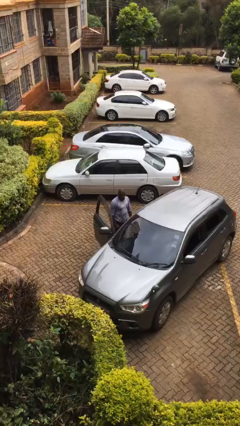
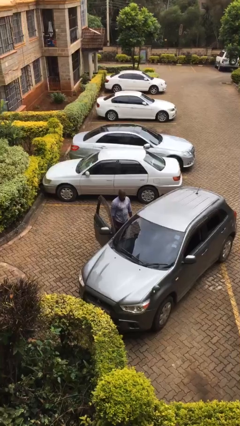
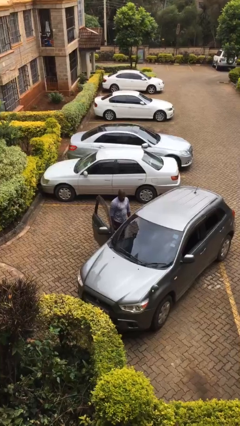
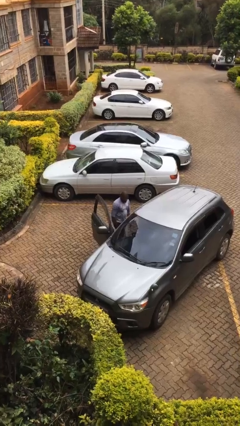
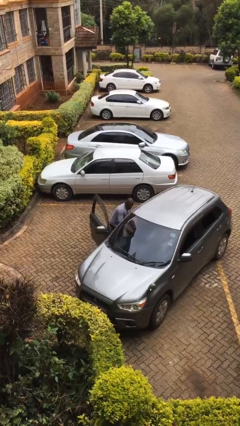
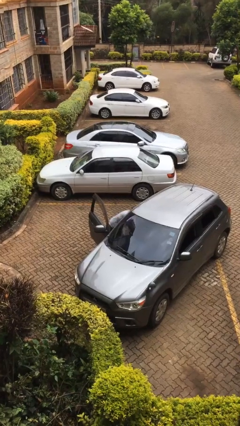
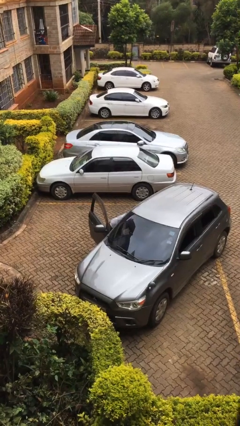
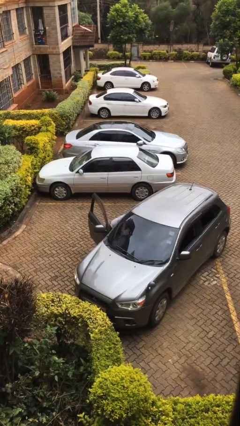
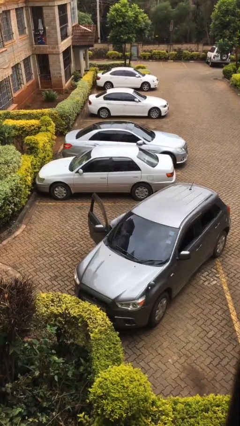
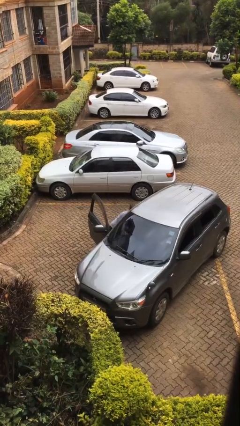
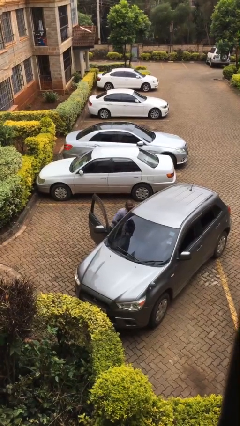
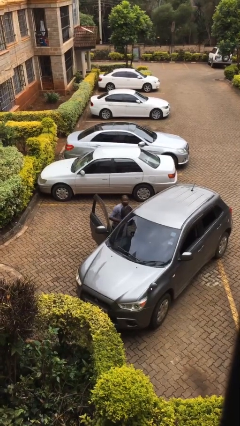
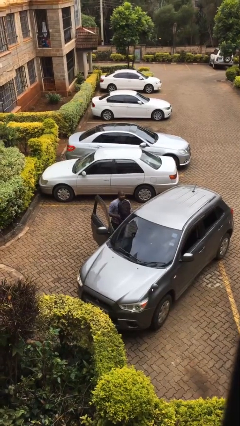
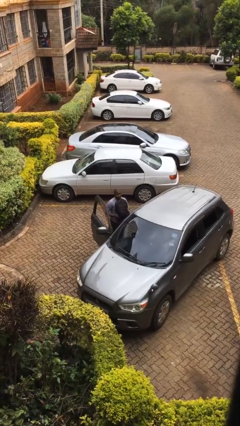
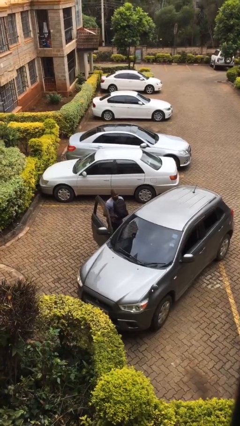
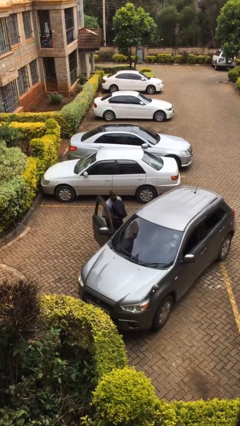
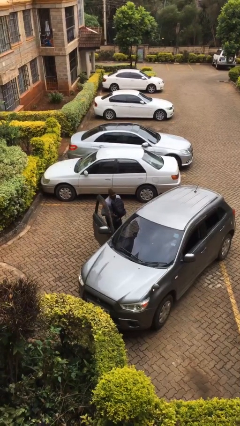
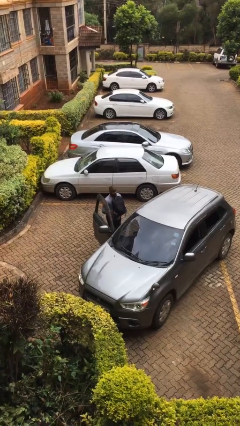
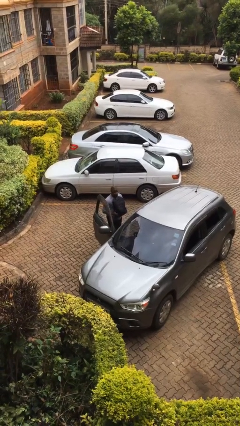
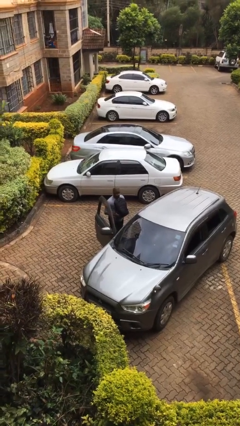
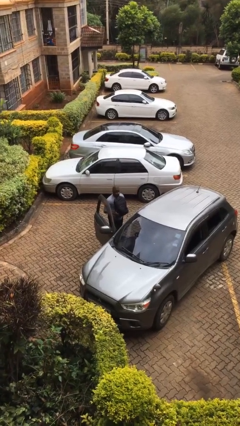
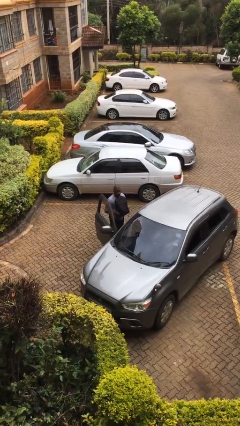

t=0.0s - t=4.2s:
person unloads car

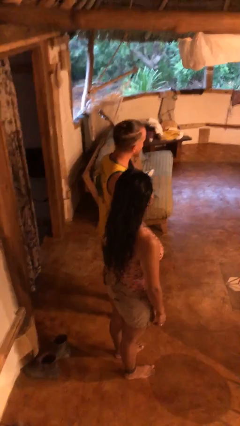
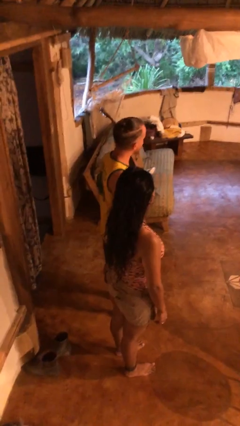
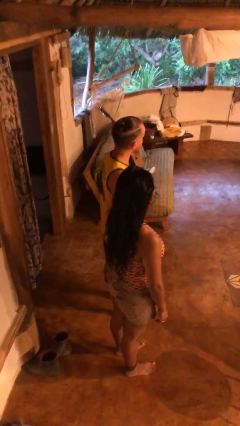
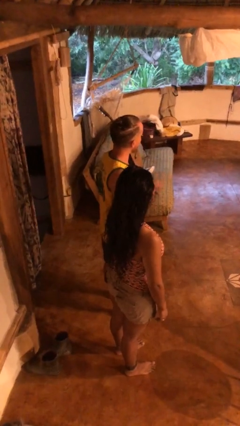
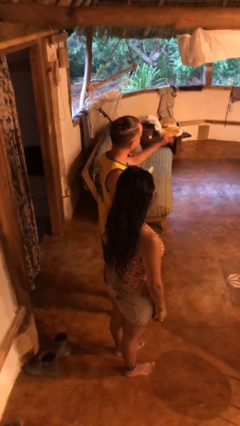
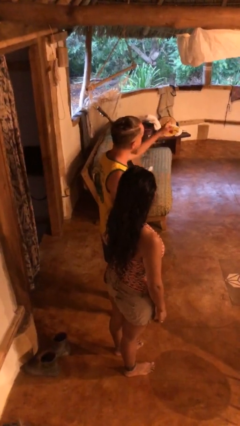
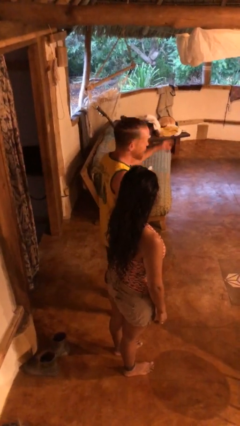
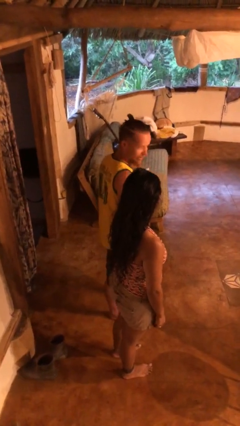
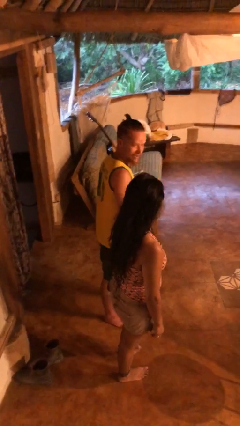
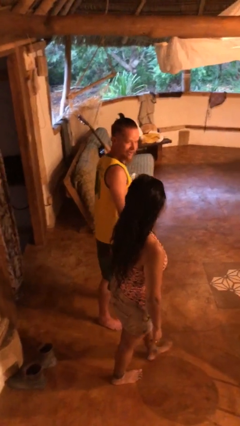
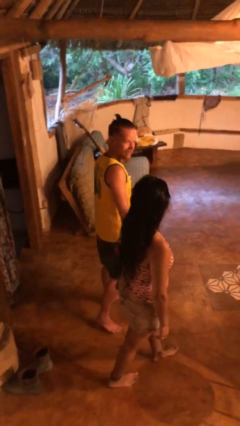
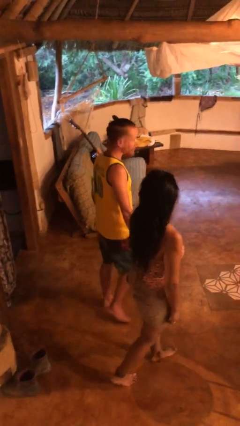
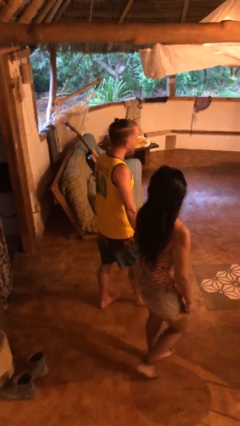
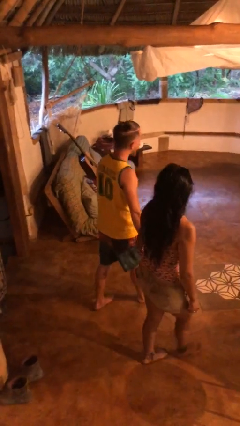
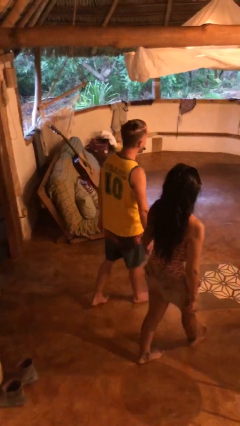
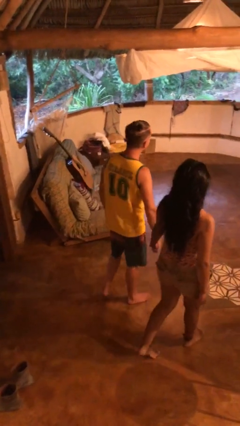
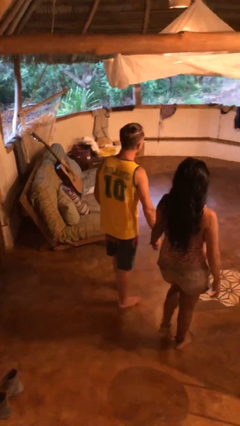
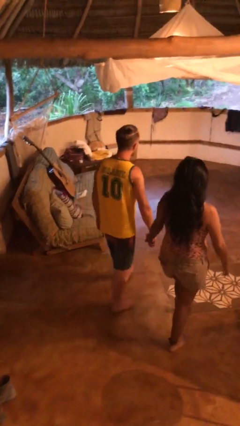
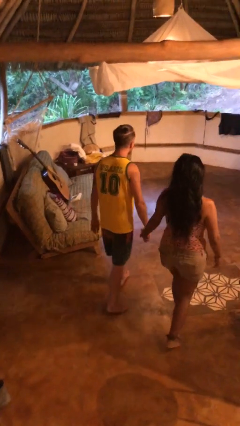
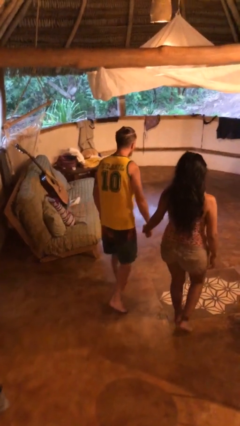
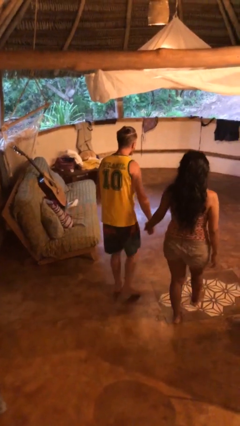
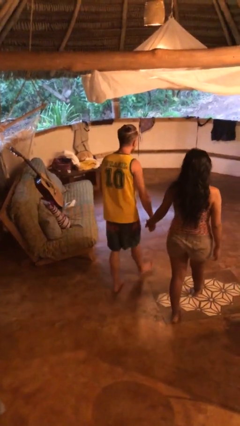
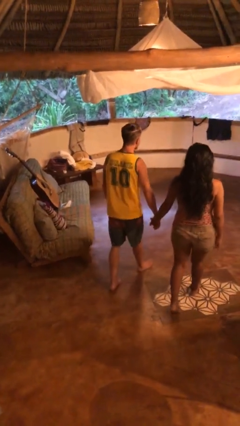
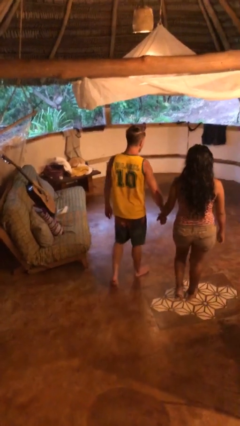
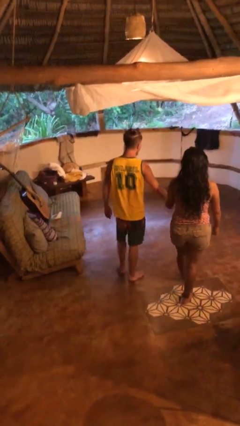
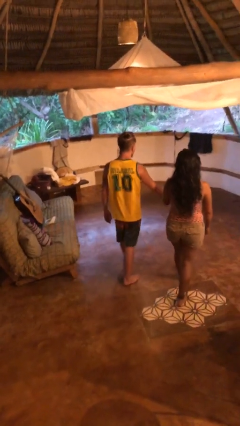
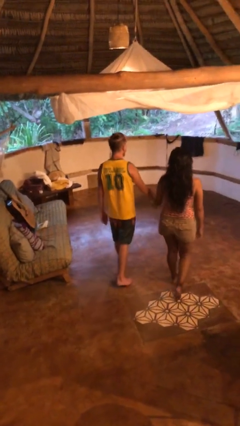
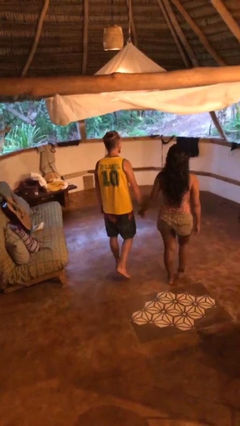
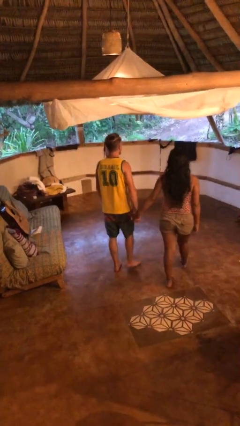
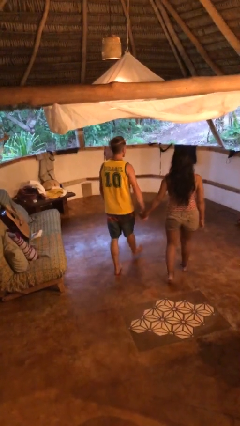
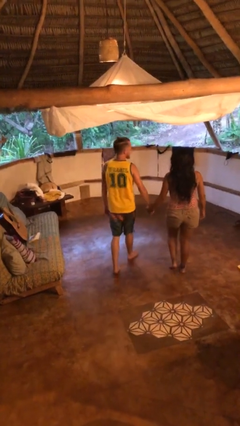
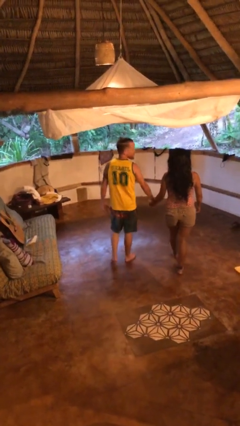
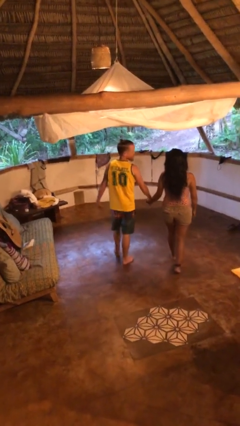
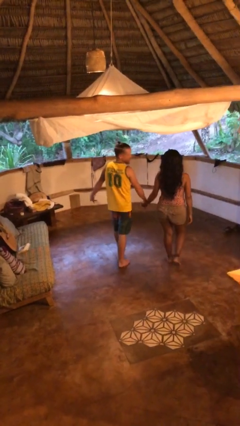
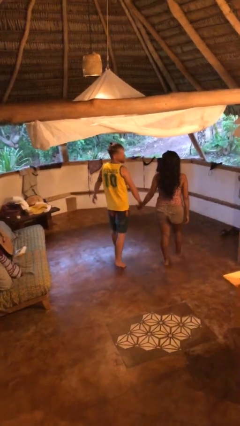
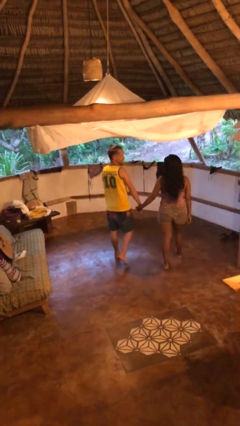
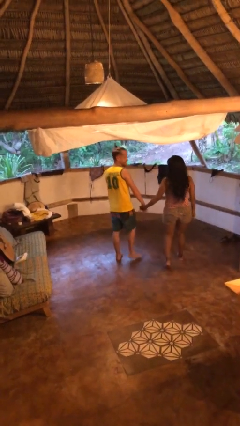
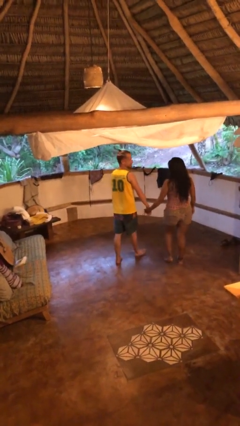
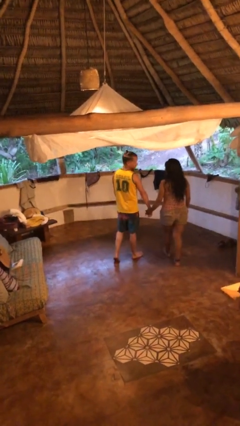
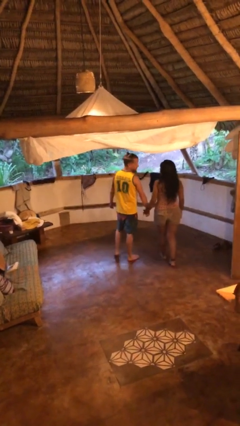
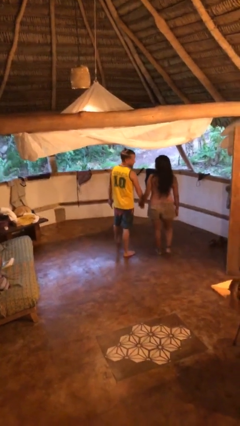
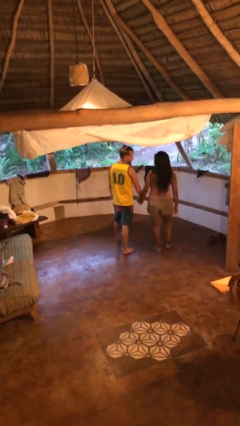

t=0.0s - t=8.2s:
person holds hand

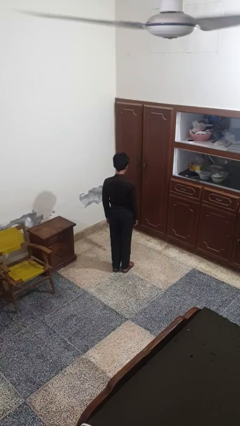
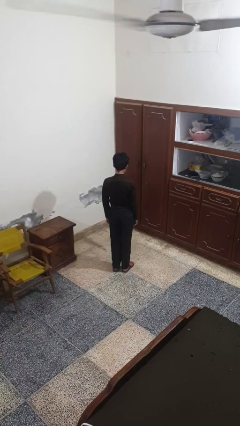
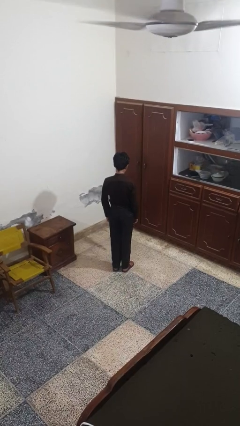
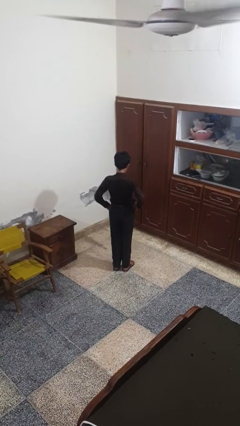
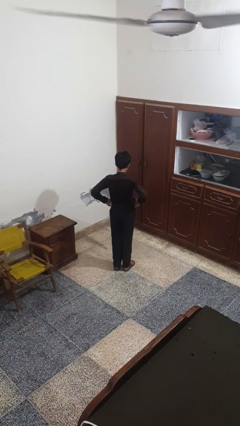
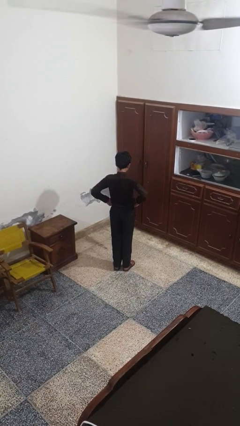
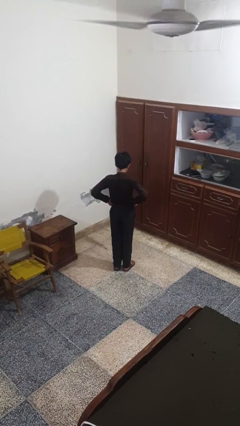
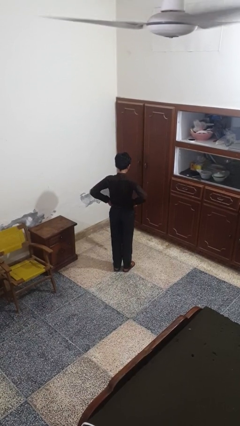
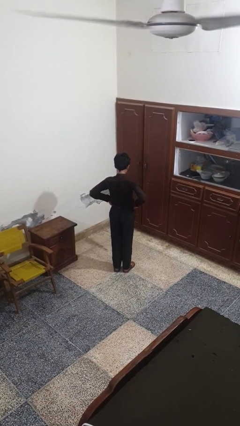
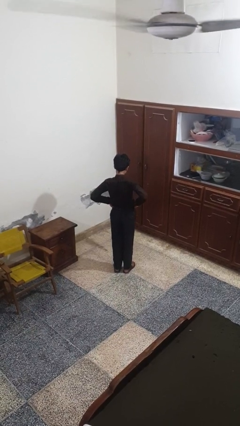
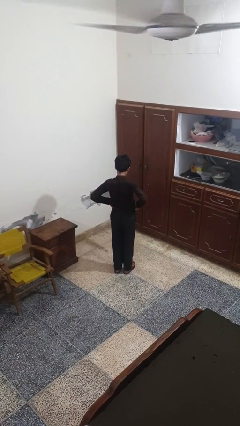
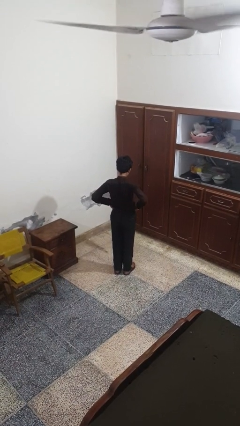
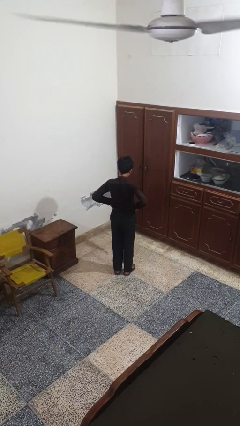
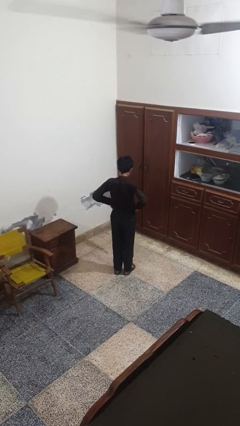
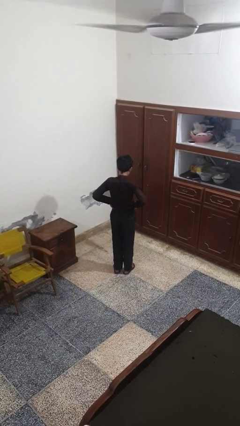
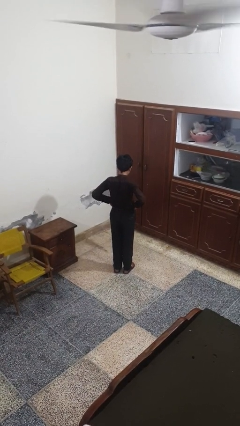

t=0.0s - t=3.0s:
person hikes up pants

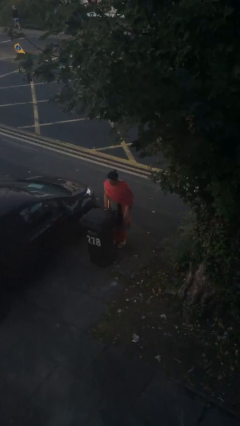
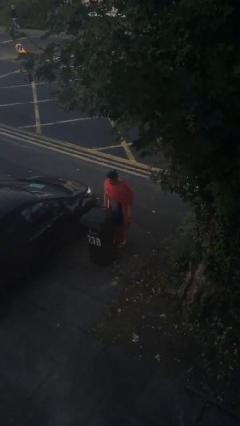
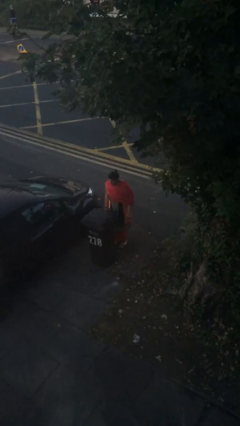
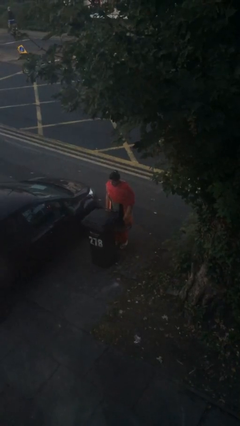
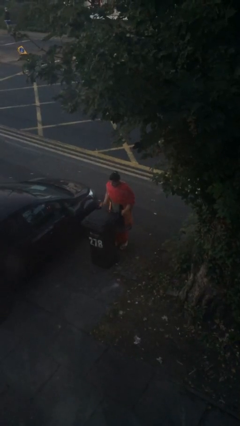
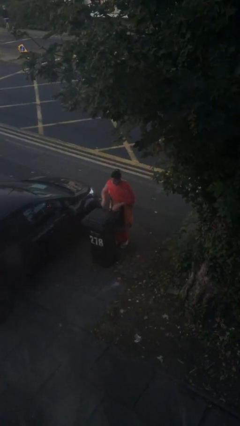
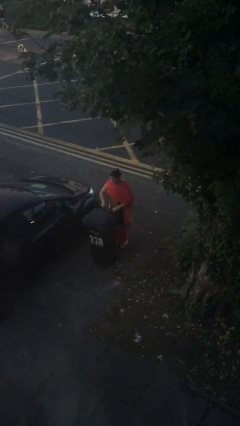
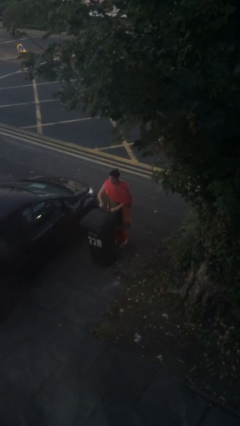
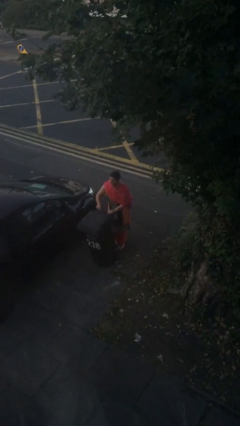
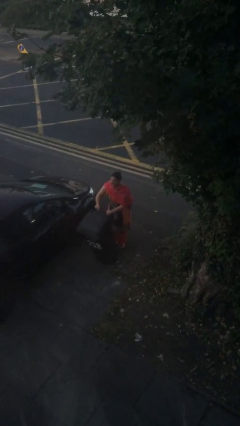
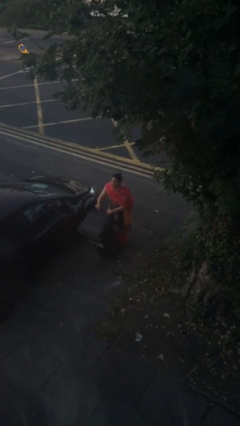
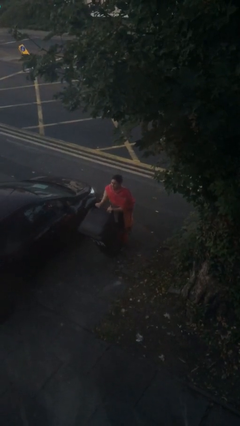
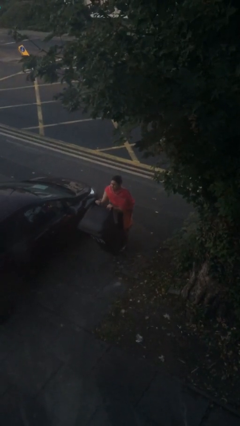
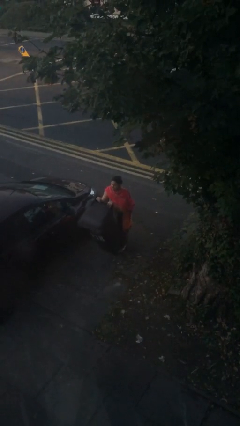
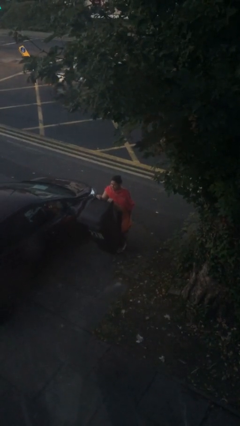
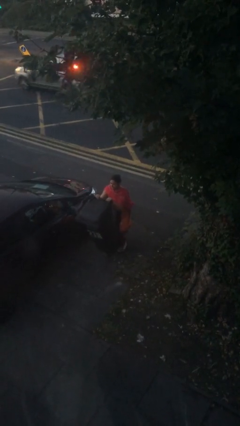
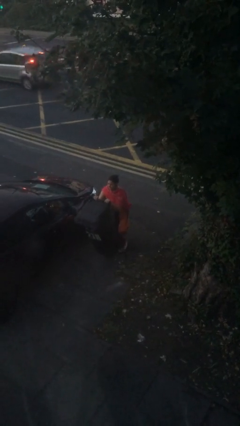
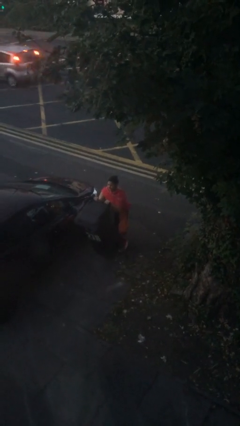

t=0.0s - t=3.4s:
person picks up object from floor
